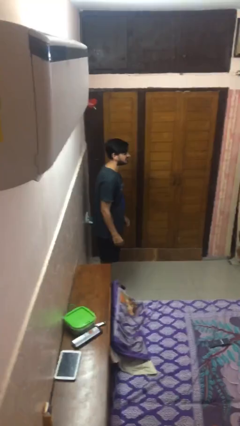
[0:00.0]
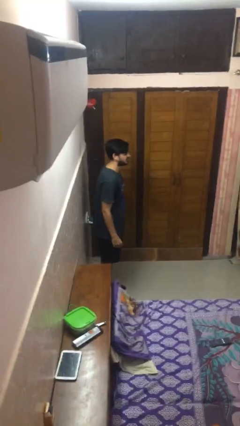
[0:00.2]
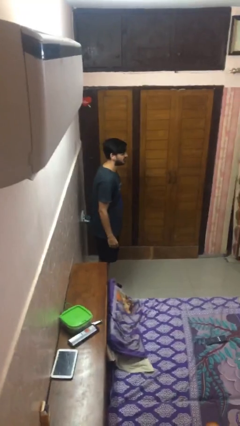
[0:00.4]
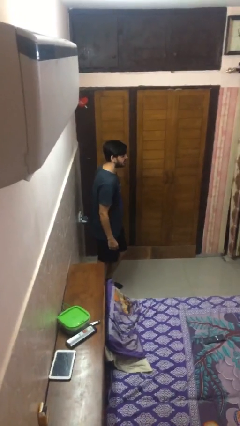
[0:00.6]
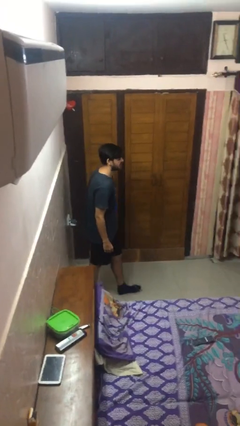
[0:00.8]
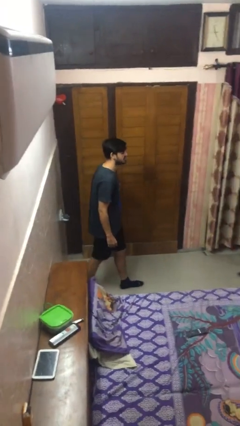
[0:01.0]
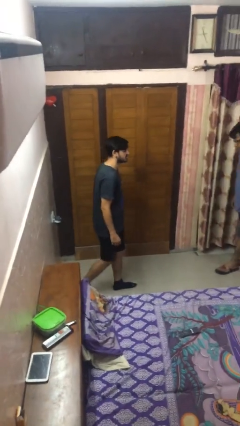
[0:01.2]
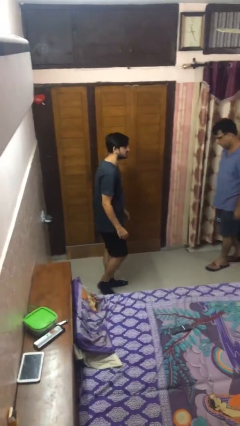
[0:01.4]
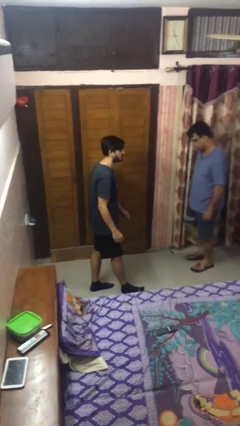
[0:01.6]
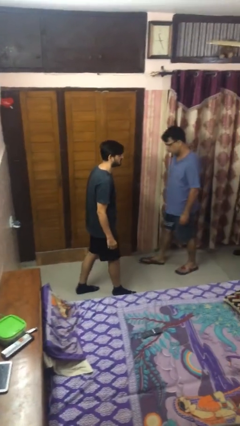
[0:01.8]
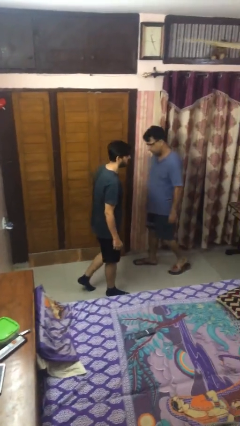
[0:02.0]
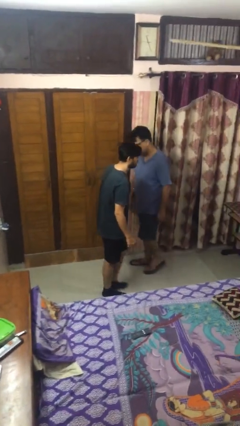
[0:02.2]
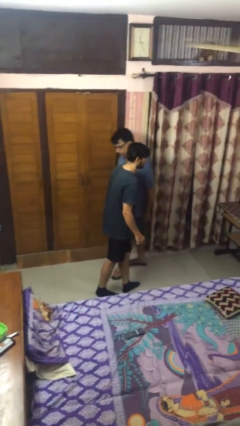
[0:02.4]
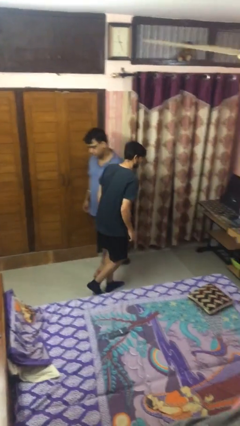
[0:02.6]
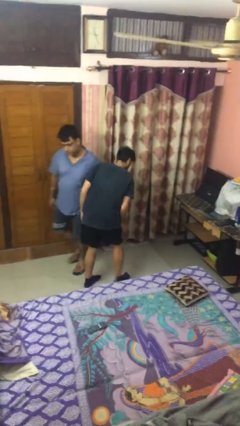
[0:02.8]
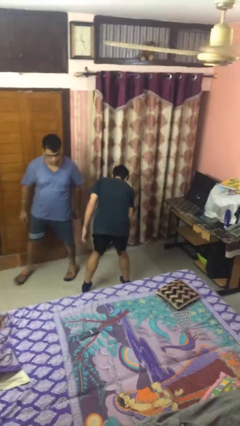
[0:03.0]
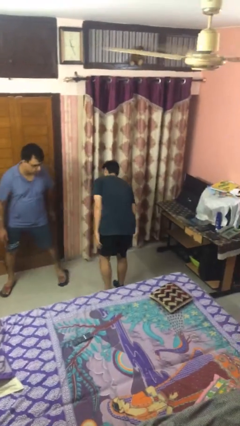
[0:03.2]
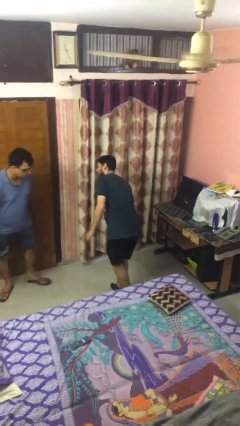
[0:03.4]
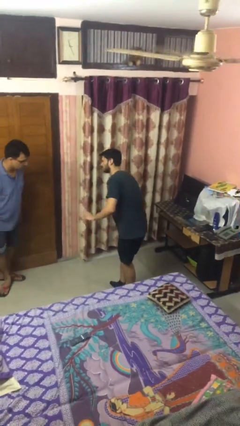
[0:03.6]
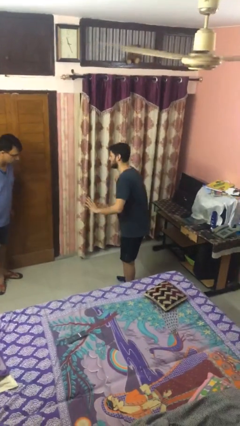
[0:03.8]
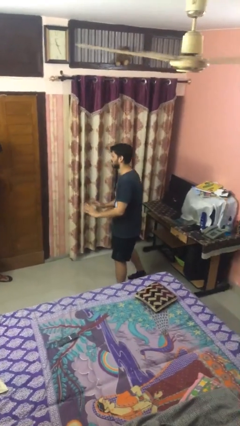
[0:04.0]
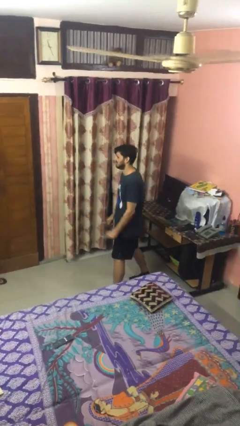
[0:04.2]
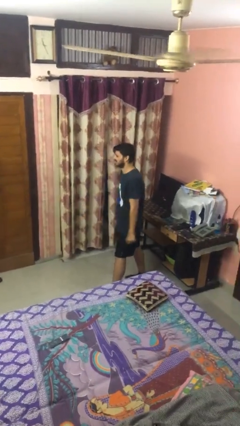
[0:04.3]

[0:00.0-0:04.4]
person bumps into person

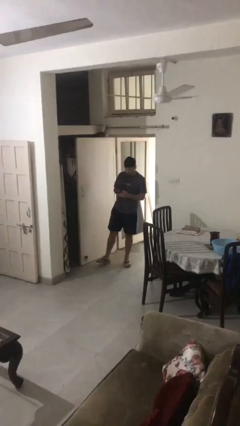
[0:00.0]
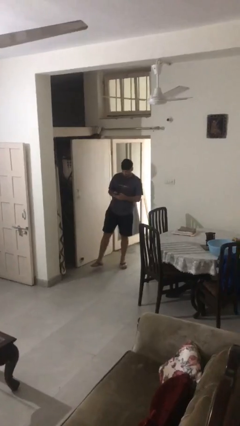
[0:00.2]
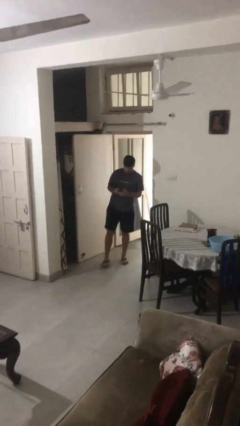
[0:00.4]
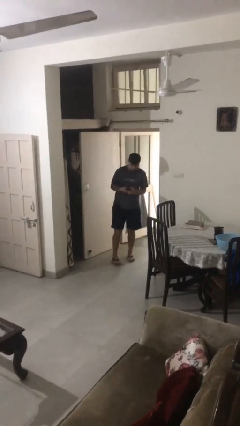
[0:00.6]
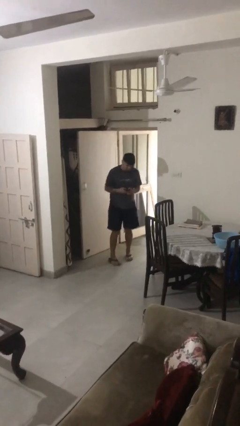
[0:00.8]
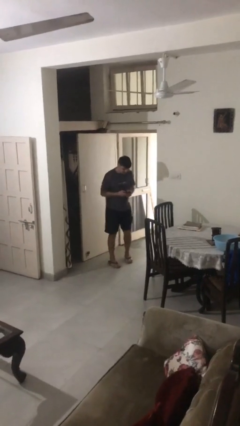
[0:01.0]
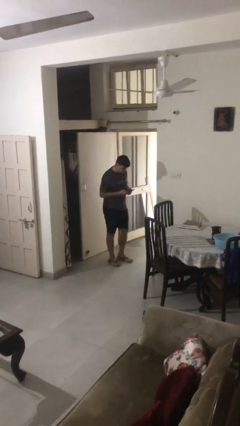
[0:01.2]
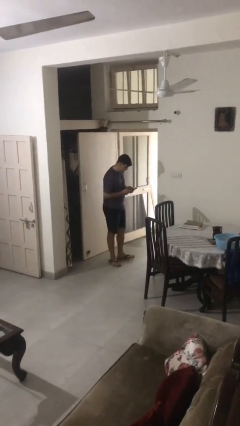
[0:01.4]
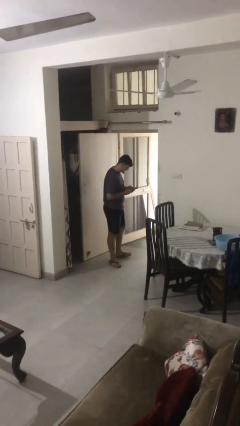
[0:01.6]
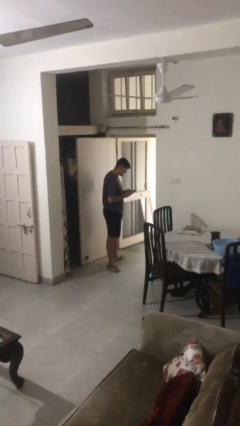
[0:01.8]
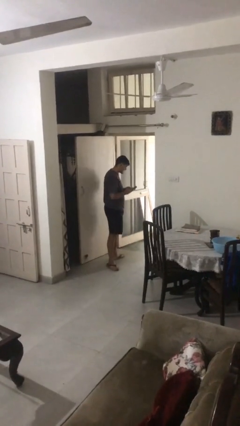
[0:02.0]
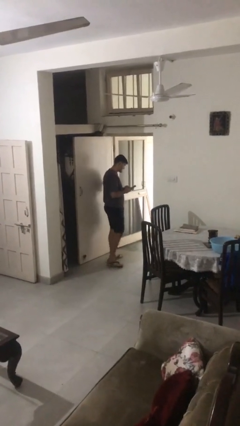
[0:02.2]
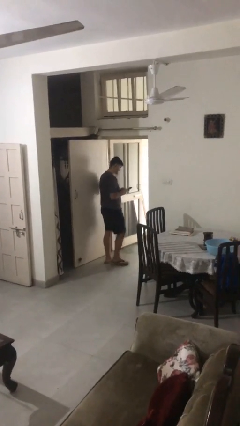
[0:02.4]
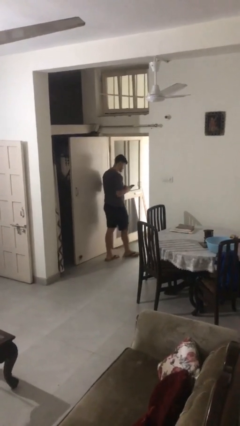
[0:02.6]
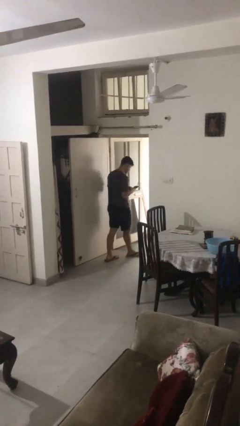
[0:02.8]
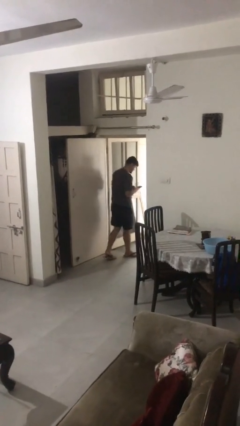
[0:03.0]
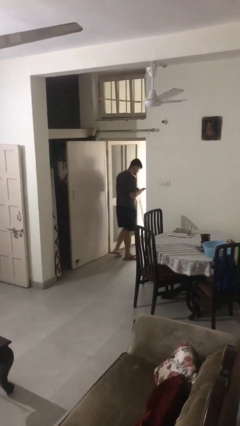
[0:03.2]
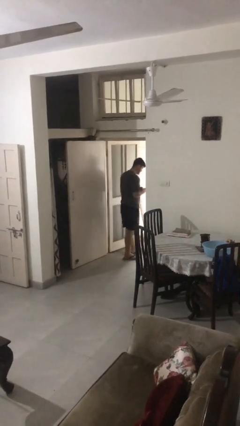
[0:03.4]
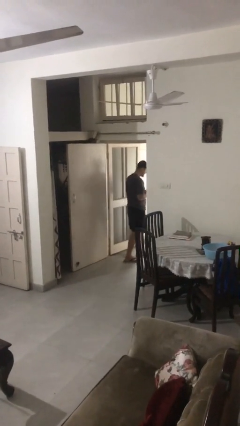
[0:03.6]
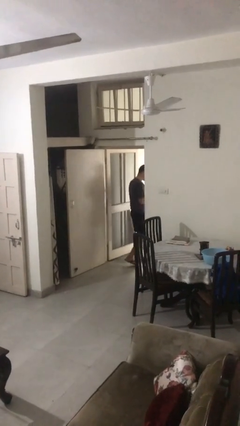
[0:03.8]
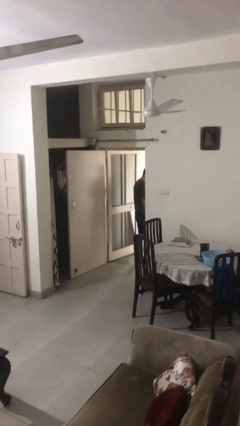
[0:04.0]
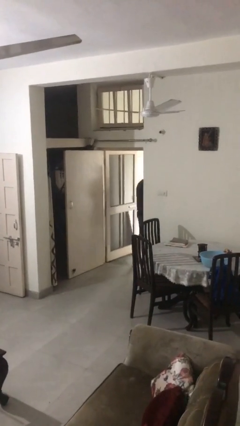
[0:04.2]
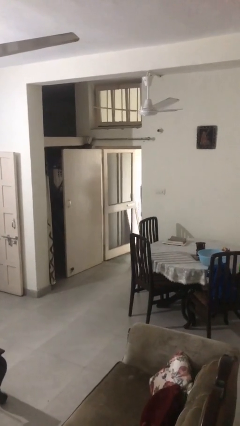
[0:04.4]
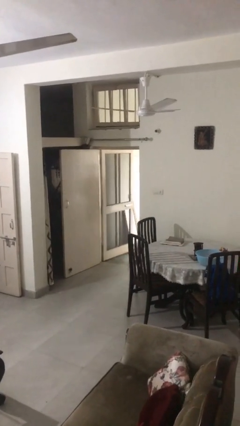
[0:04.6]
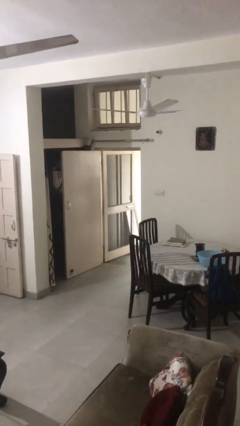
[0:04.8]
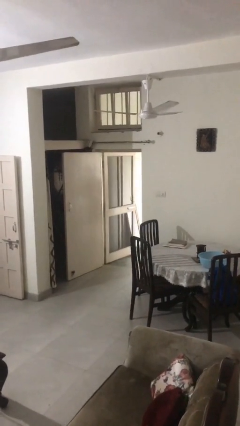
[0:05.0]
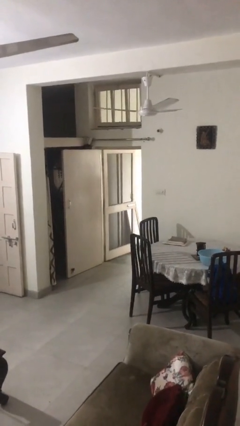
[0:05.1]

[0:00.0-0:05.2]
person exits scene through structure

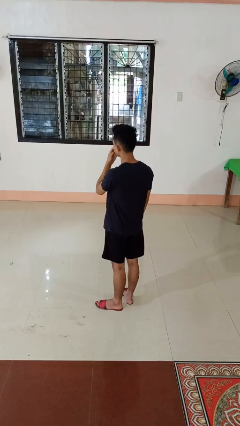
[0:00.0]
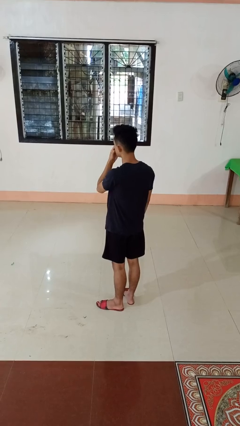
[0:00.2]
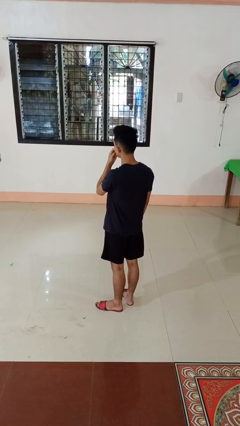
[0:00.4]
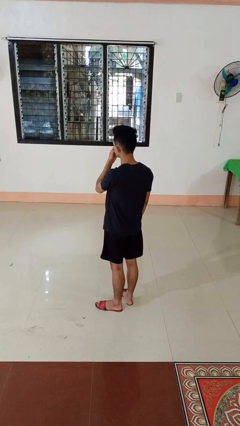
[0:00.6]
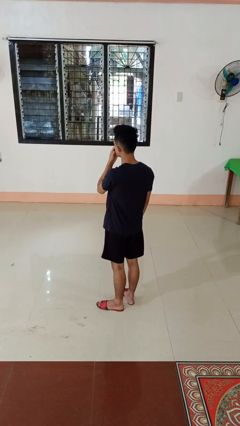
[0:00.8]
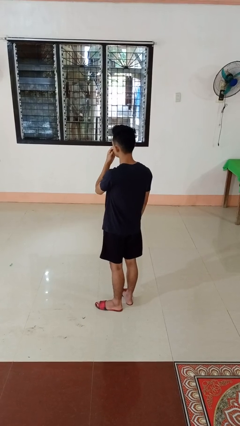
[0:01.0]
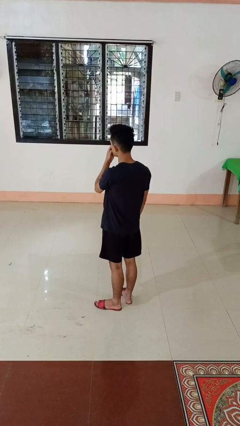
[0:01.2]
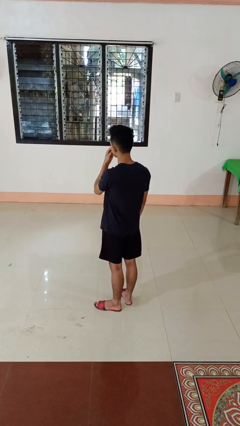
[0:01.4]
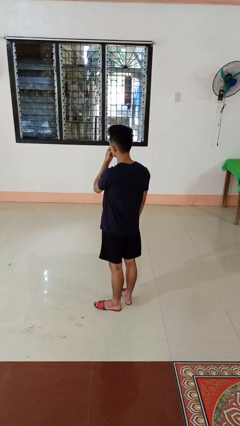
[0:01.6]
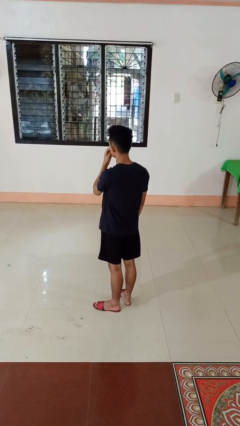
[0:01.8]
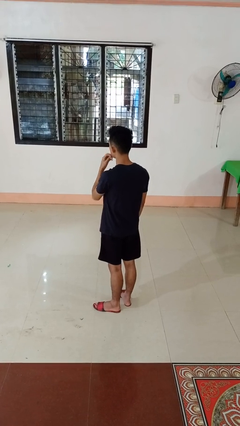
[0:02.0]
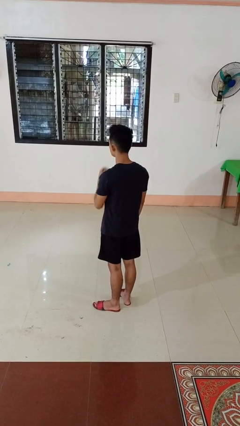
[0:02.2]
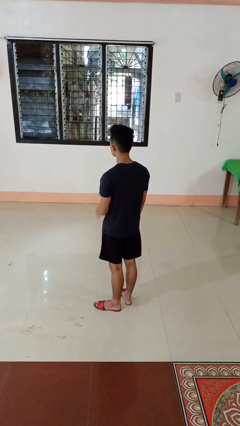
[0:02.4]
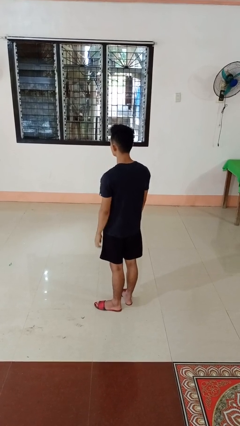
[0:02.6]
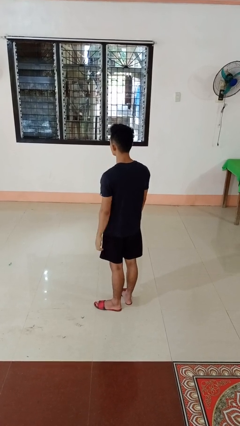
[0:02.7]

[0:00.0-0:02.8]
person scratches face

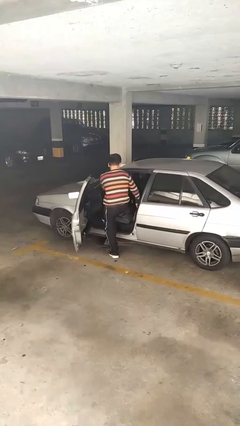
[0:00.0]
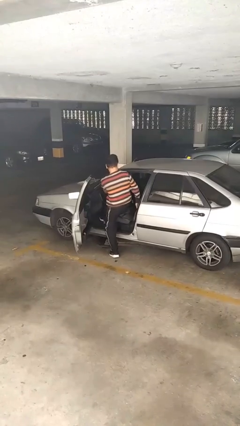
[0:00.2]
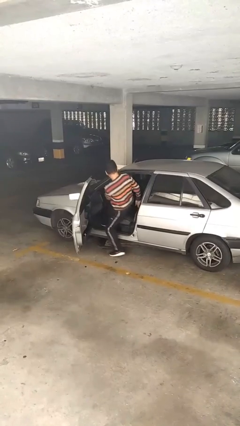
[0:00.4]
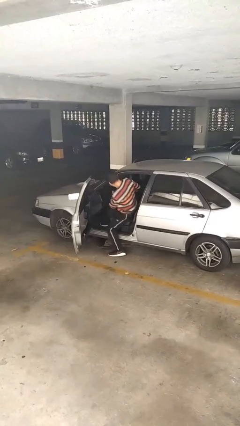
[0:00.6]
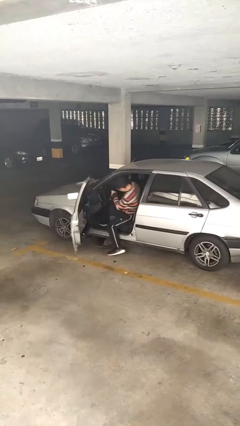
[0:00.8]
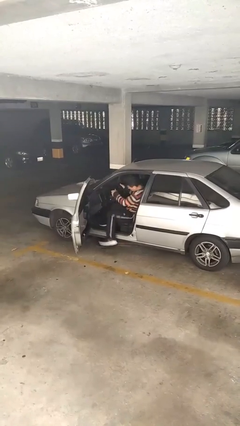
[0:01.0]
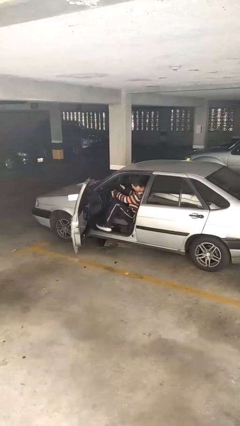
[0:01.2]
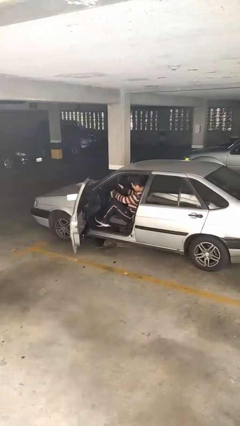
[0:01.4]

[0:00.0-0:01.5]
person enters car

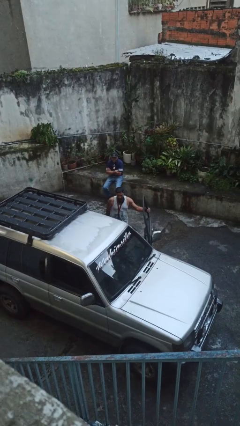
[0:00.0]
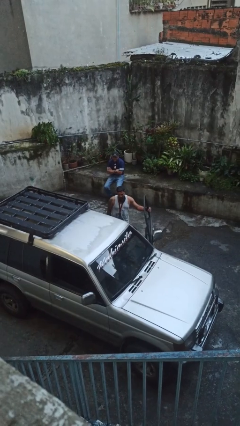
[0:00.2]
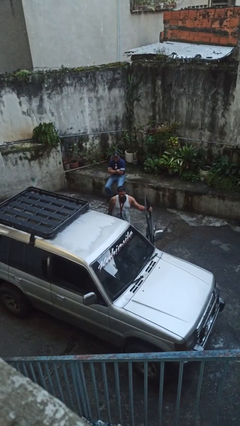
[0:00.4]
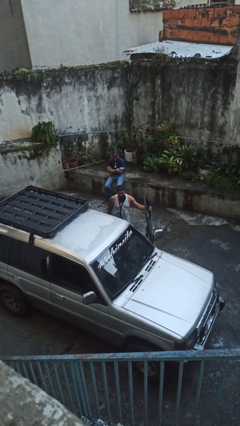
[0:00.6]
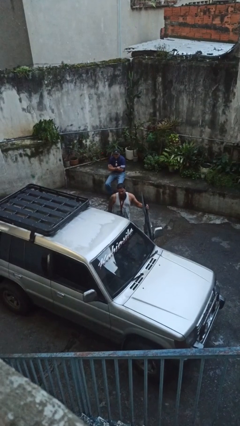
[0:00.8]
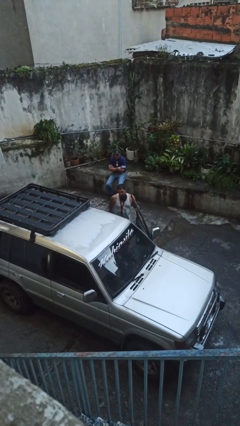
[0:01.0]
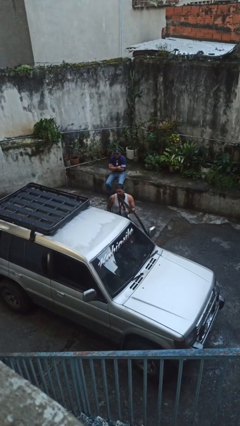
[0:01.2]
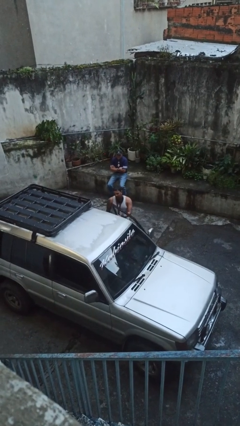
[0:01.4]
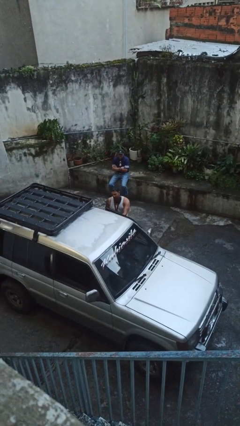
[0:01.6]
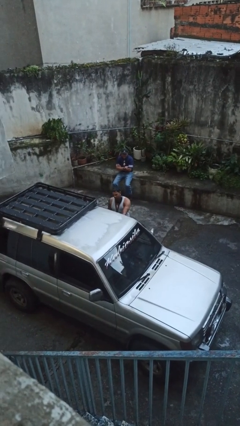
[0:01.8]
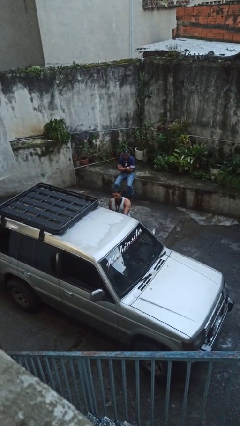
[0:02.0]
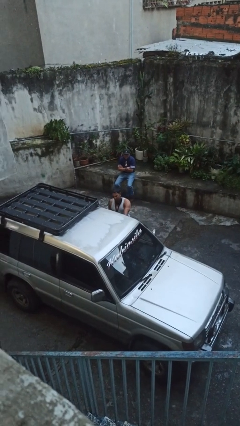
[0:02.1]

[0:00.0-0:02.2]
person closes car door

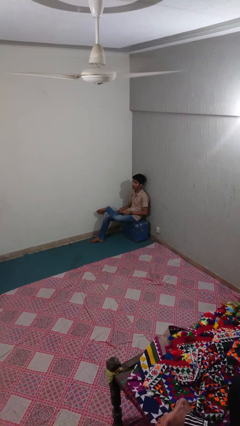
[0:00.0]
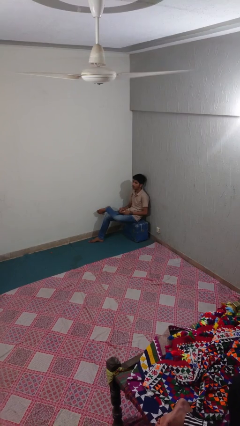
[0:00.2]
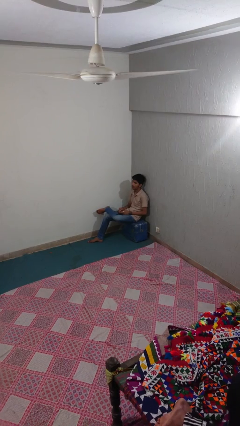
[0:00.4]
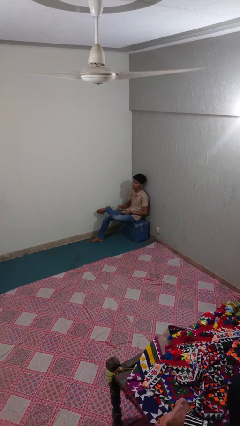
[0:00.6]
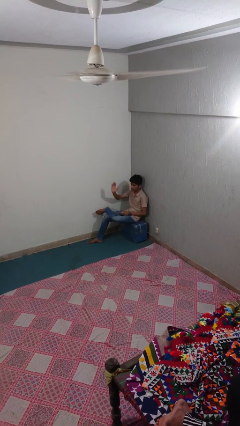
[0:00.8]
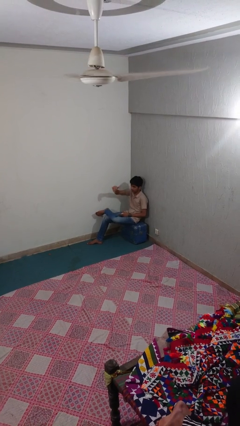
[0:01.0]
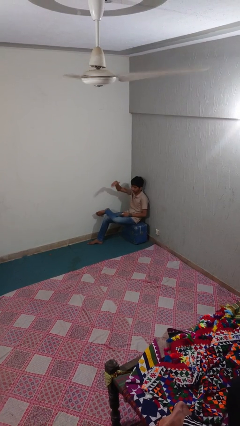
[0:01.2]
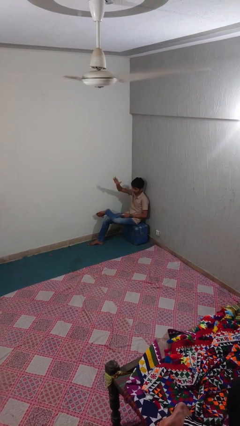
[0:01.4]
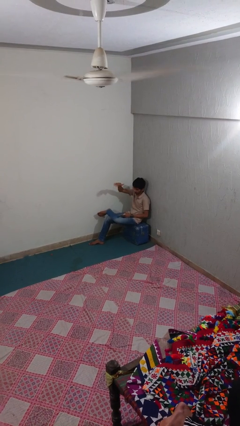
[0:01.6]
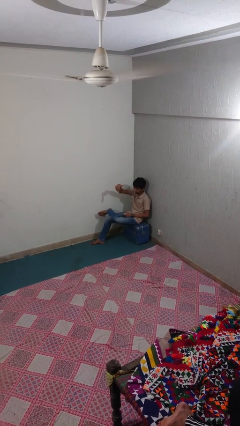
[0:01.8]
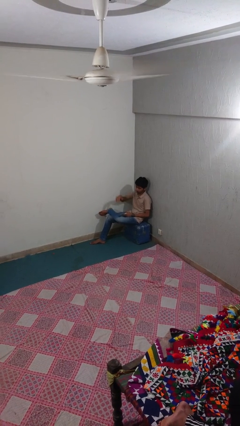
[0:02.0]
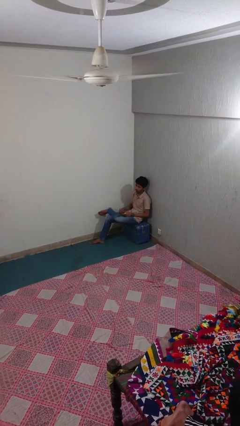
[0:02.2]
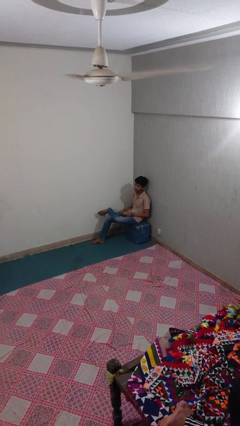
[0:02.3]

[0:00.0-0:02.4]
person gestures come here
